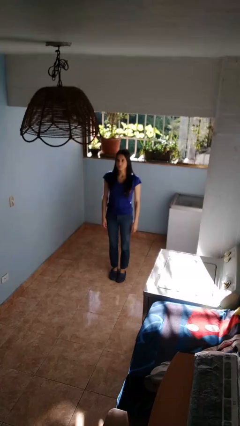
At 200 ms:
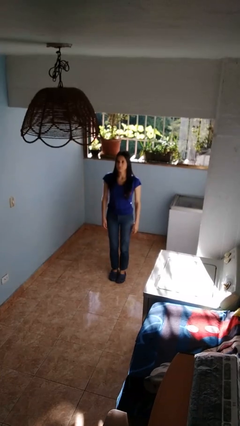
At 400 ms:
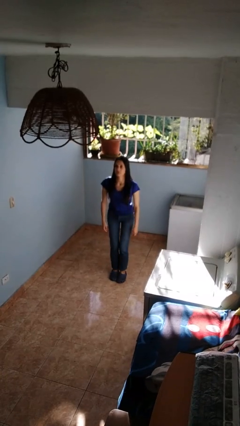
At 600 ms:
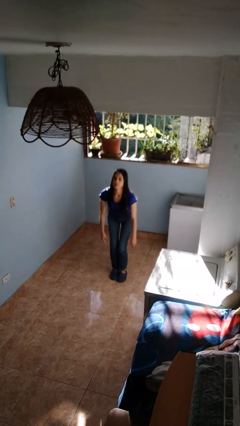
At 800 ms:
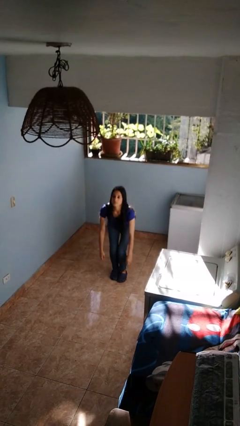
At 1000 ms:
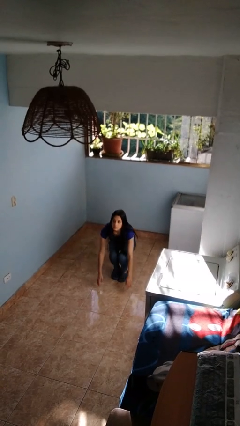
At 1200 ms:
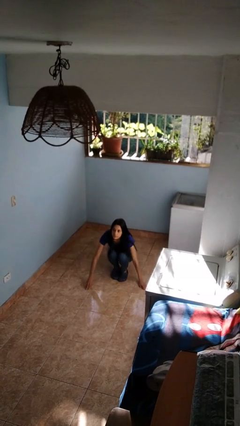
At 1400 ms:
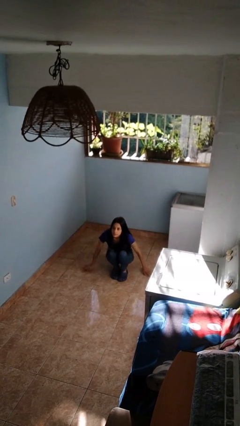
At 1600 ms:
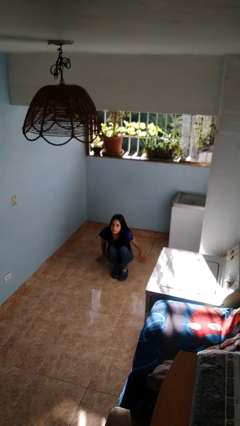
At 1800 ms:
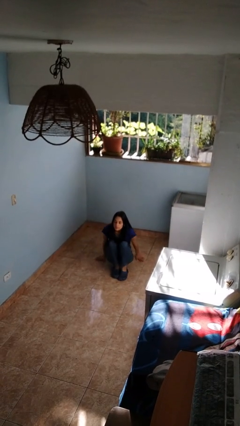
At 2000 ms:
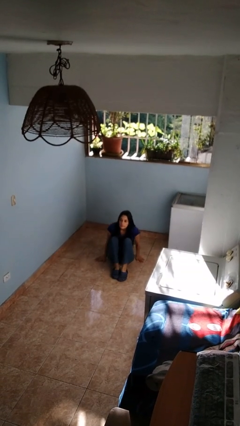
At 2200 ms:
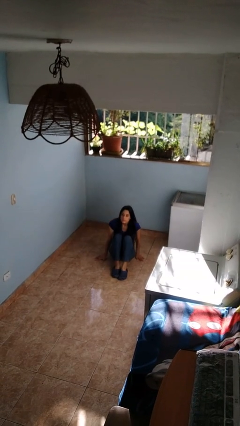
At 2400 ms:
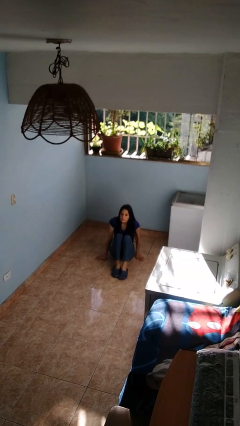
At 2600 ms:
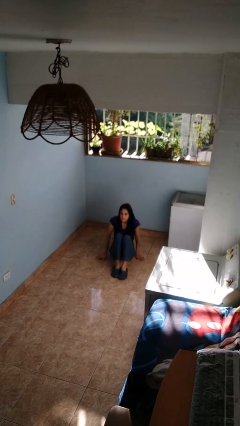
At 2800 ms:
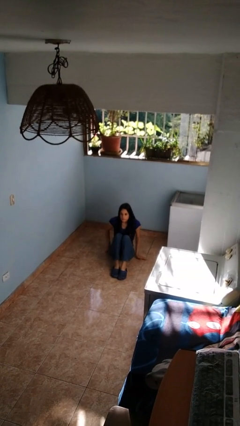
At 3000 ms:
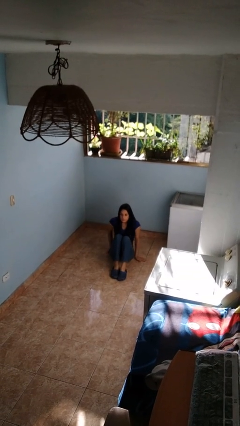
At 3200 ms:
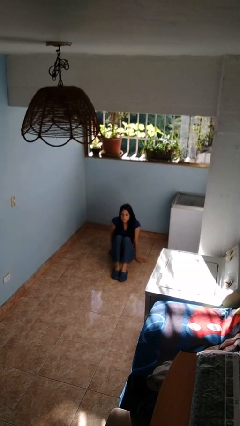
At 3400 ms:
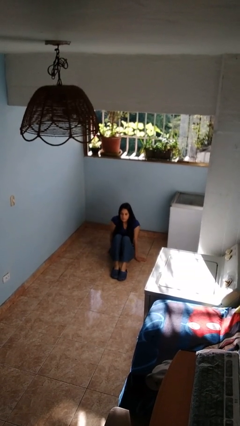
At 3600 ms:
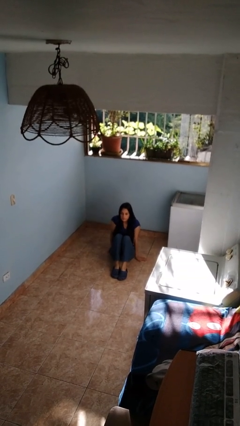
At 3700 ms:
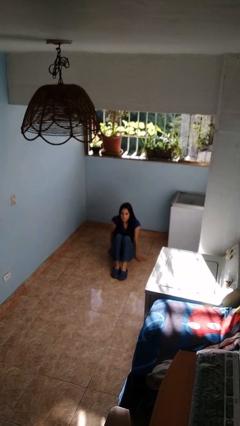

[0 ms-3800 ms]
person sits crisscross

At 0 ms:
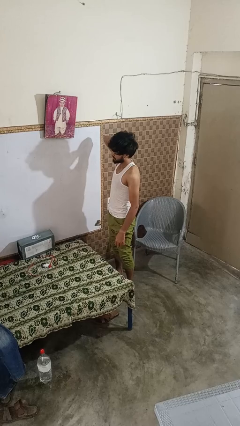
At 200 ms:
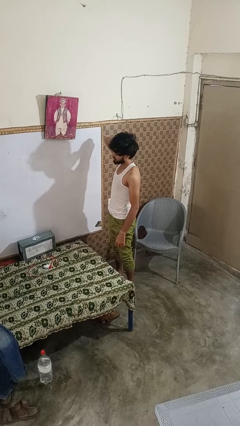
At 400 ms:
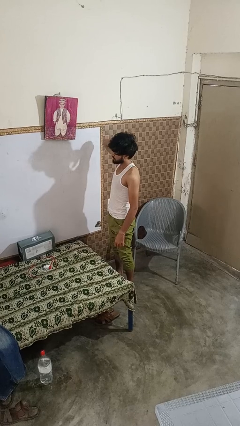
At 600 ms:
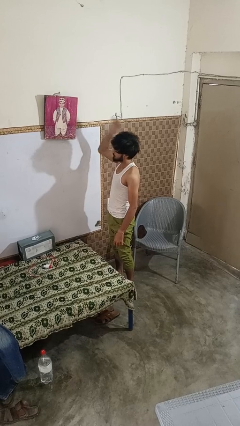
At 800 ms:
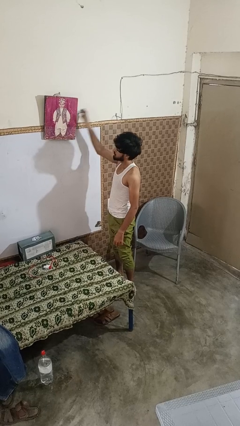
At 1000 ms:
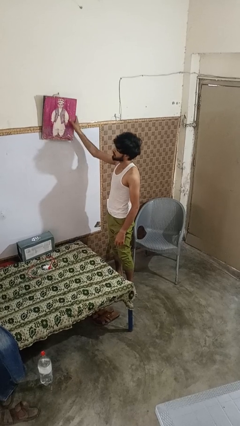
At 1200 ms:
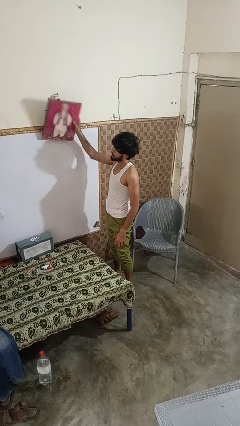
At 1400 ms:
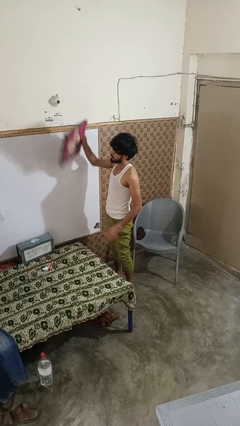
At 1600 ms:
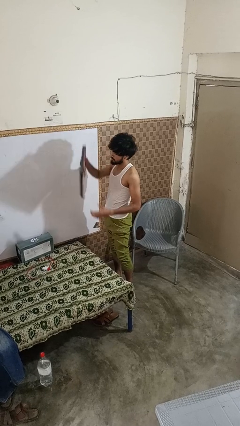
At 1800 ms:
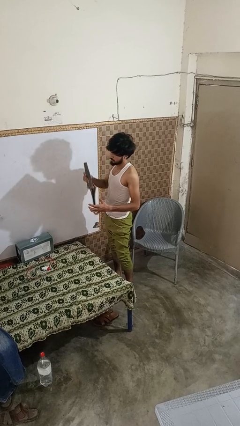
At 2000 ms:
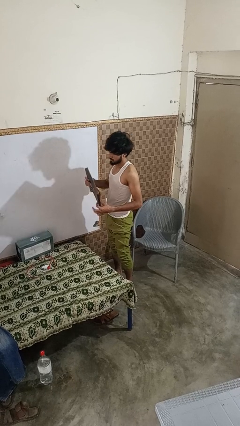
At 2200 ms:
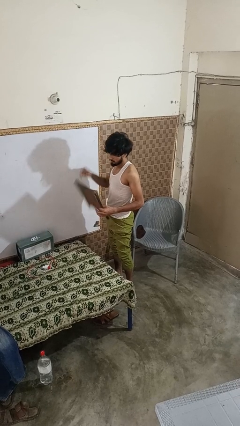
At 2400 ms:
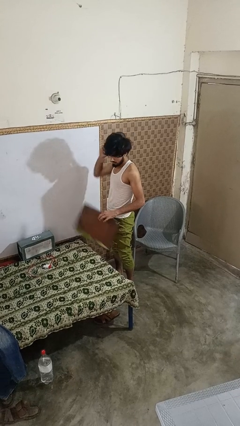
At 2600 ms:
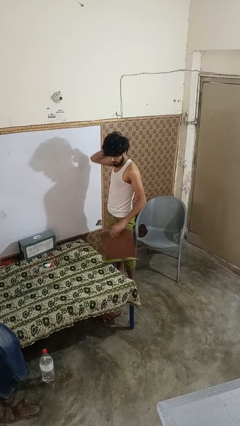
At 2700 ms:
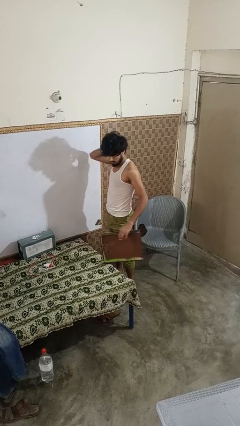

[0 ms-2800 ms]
person takes down picture frame

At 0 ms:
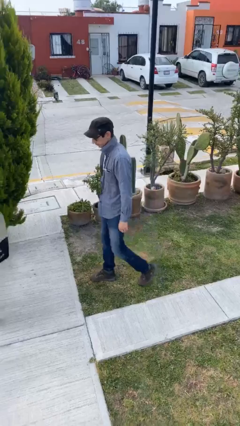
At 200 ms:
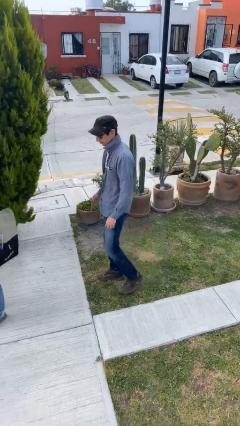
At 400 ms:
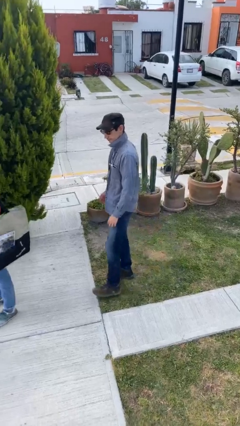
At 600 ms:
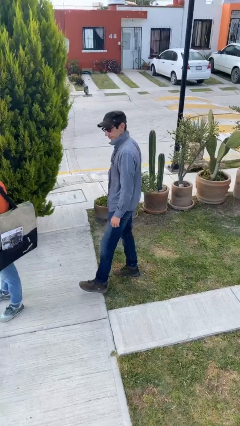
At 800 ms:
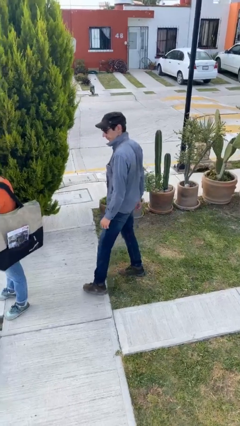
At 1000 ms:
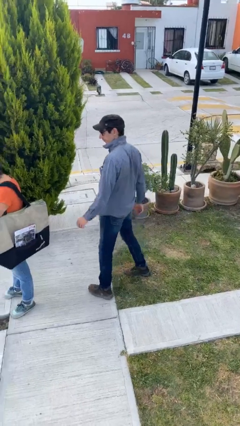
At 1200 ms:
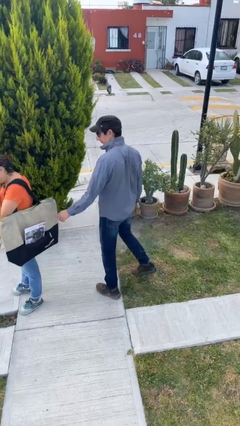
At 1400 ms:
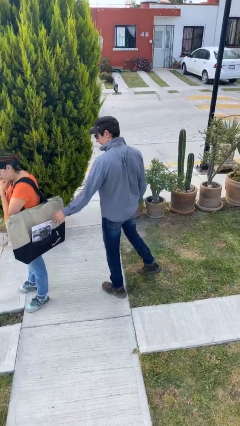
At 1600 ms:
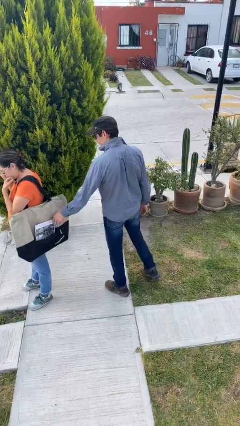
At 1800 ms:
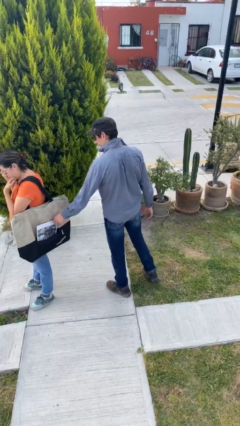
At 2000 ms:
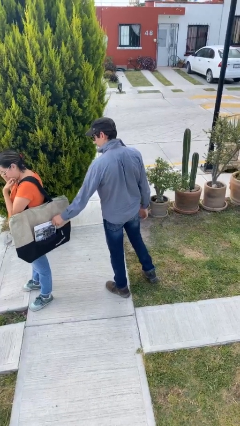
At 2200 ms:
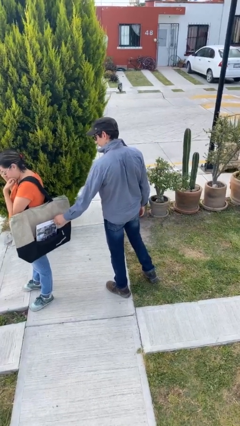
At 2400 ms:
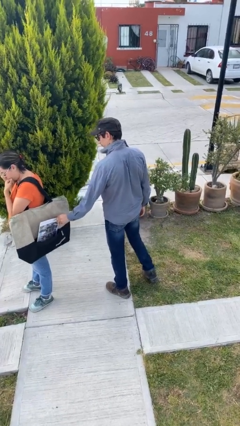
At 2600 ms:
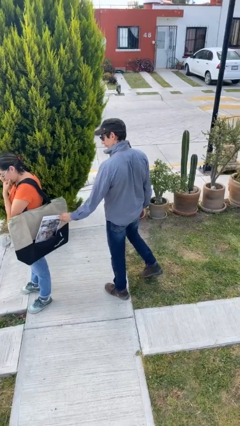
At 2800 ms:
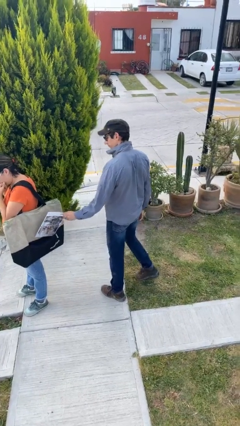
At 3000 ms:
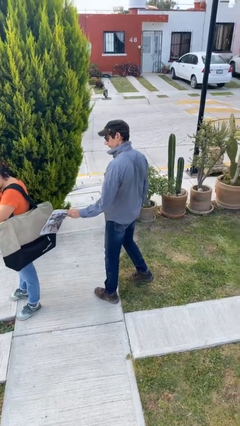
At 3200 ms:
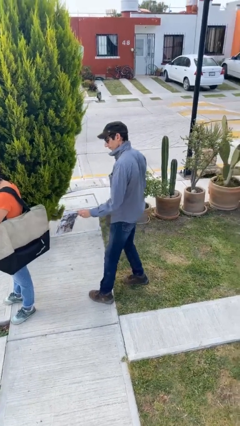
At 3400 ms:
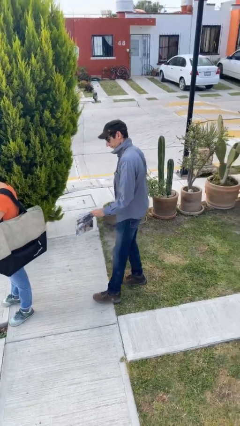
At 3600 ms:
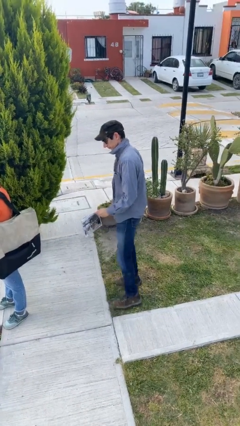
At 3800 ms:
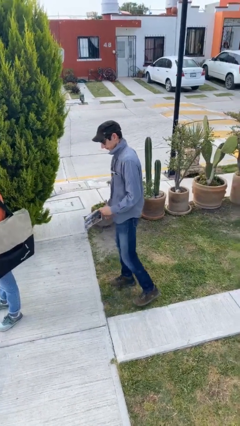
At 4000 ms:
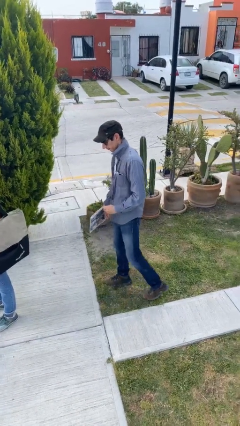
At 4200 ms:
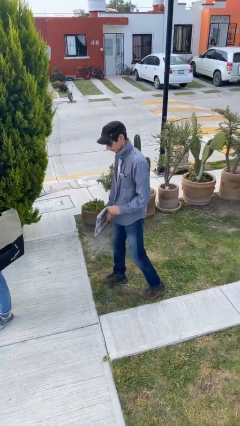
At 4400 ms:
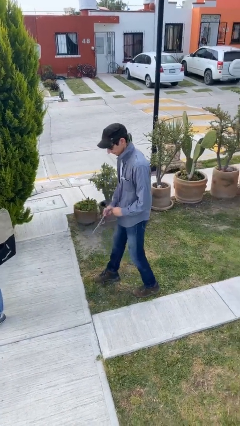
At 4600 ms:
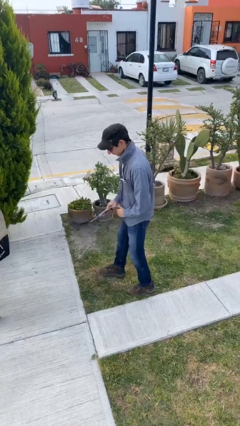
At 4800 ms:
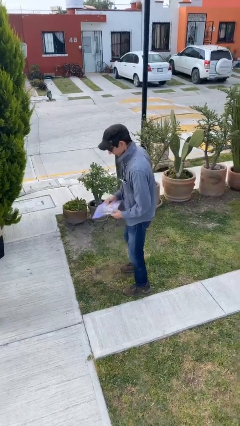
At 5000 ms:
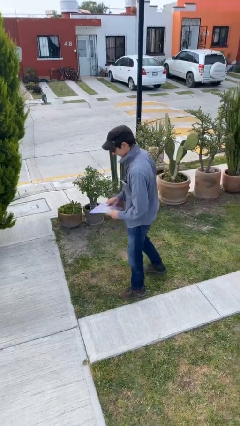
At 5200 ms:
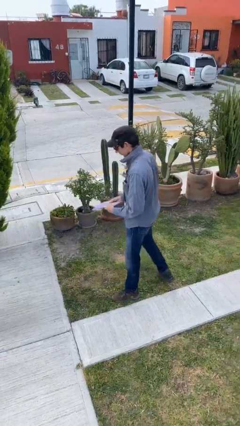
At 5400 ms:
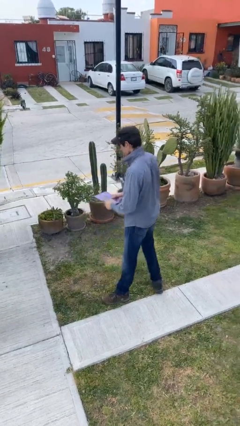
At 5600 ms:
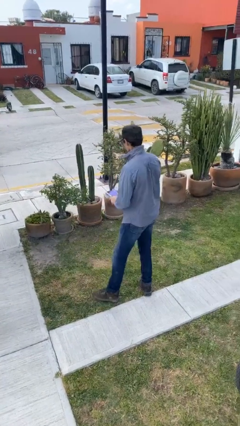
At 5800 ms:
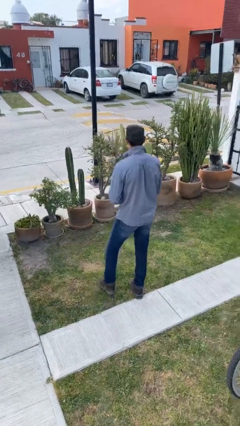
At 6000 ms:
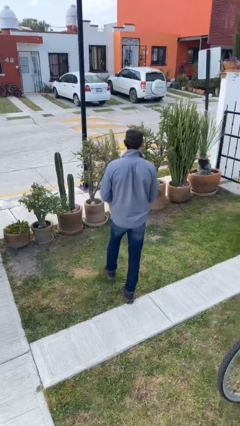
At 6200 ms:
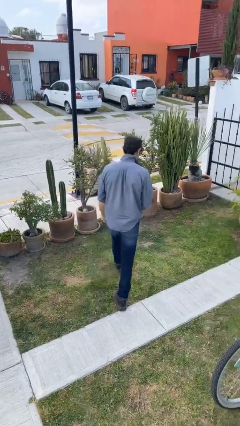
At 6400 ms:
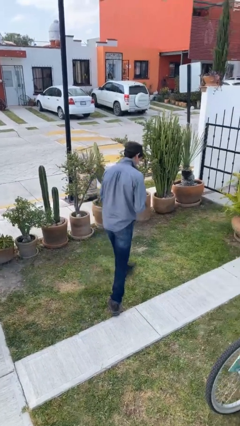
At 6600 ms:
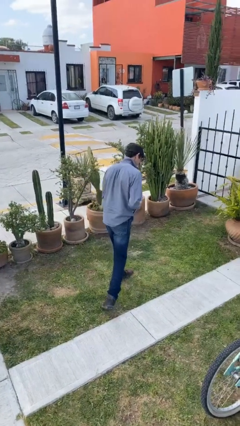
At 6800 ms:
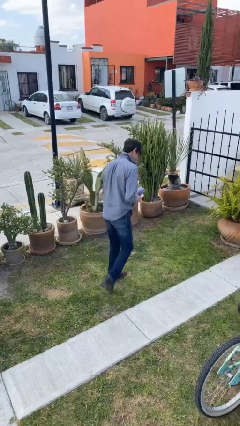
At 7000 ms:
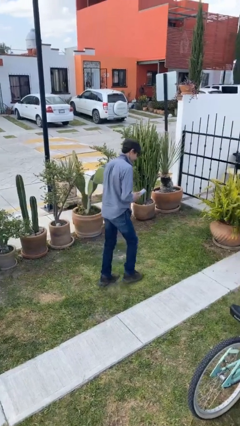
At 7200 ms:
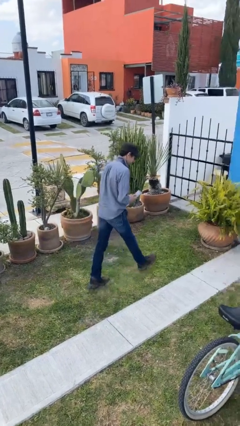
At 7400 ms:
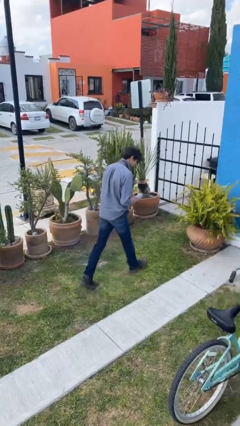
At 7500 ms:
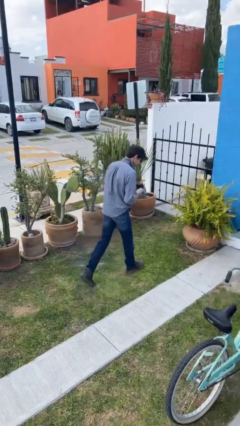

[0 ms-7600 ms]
person steals object from person

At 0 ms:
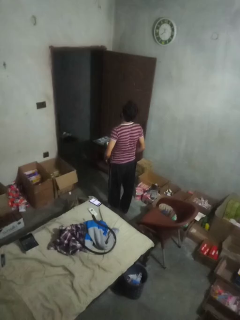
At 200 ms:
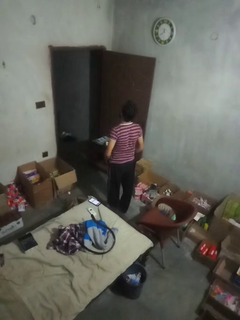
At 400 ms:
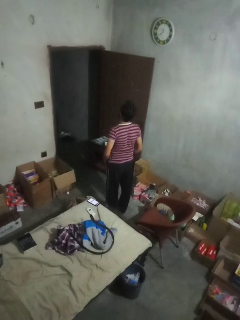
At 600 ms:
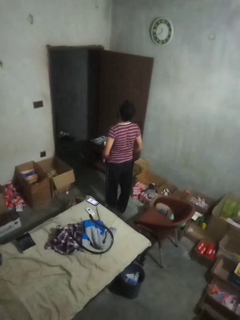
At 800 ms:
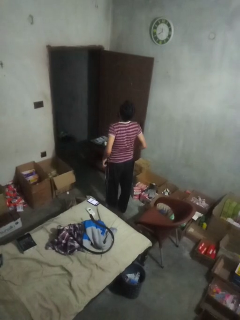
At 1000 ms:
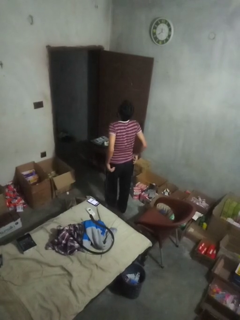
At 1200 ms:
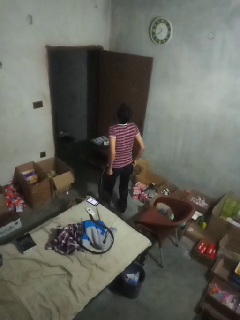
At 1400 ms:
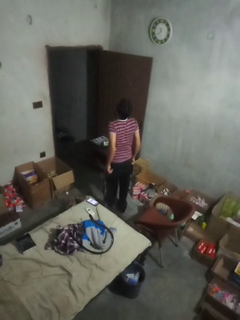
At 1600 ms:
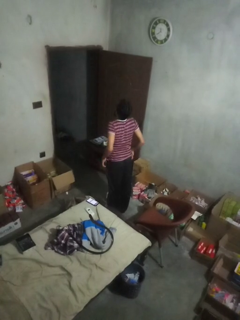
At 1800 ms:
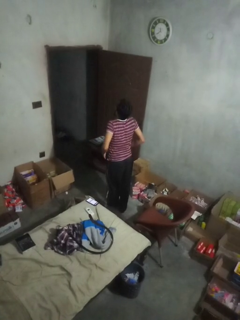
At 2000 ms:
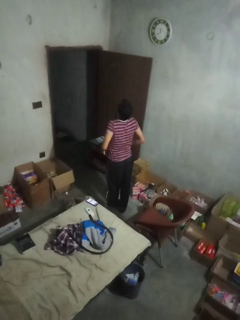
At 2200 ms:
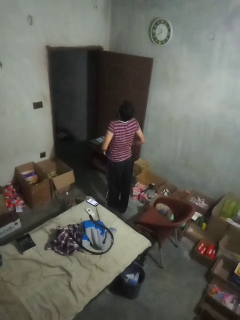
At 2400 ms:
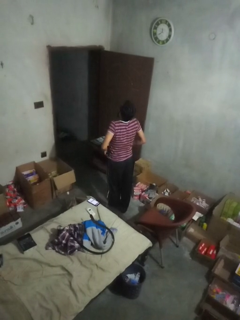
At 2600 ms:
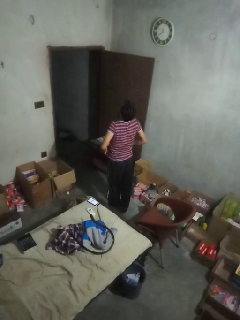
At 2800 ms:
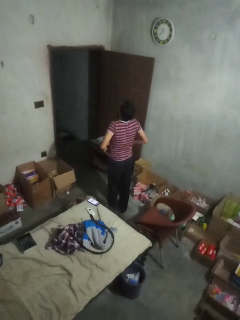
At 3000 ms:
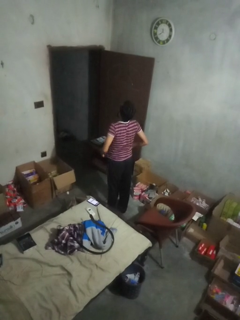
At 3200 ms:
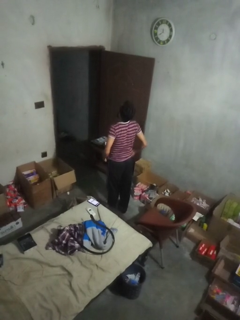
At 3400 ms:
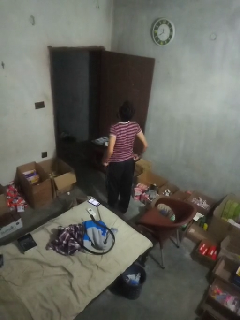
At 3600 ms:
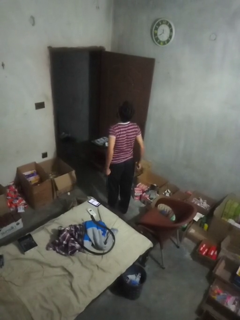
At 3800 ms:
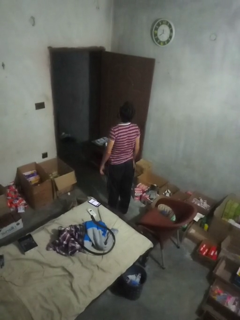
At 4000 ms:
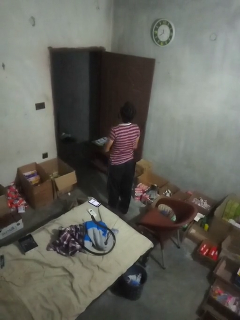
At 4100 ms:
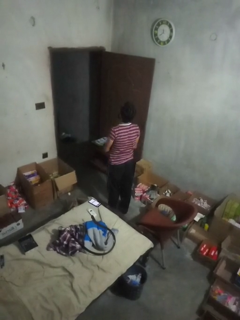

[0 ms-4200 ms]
person hikes up pants

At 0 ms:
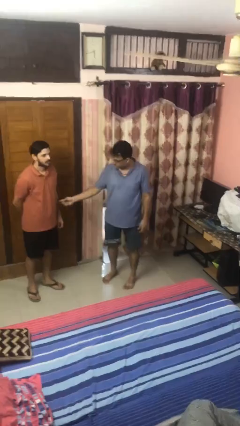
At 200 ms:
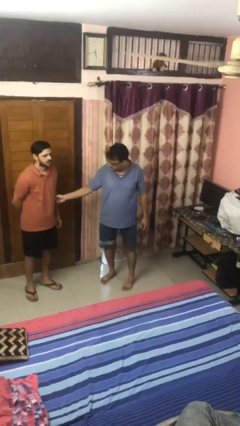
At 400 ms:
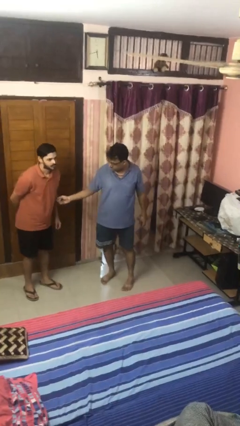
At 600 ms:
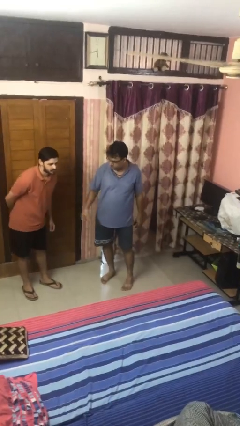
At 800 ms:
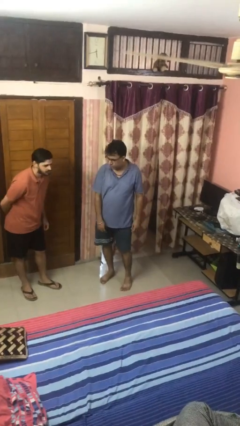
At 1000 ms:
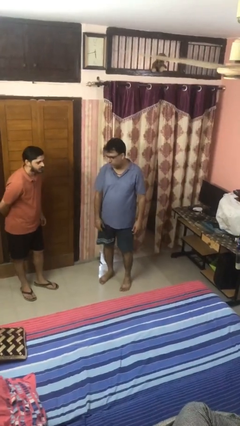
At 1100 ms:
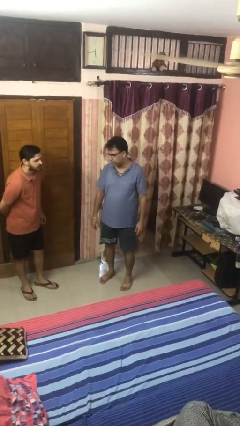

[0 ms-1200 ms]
person tickles person
